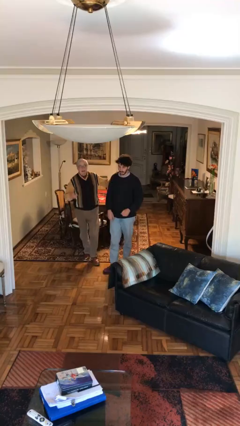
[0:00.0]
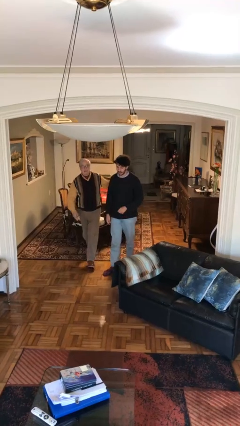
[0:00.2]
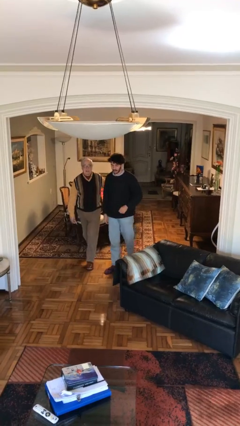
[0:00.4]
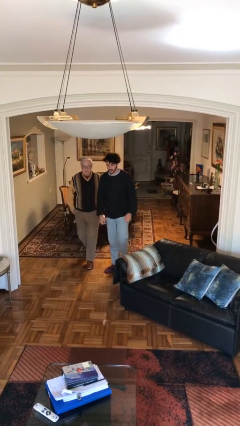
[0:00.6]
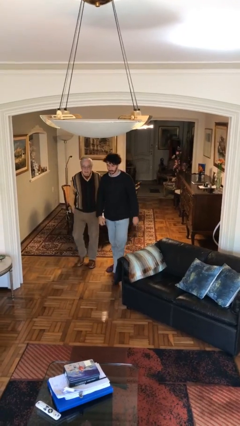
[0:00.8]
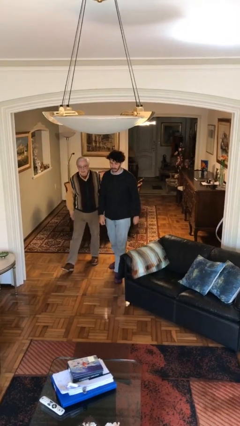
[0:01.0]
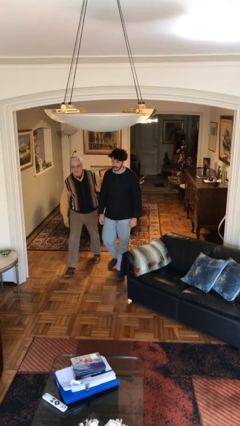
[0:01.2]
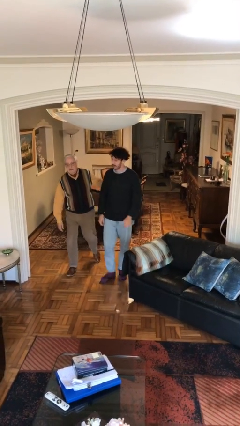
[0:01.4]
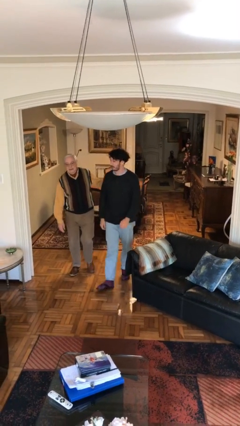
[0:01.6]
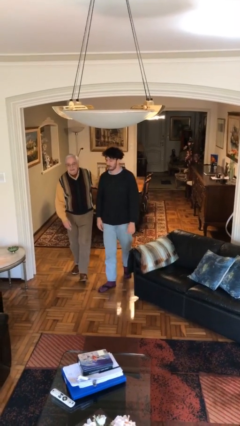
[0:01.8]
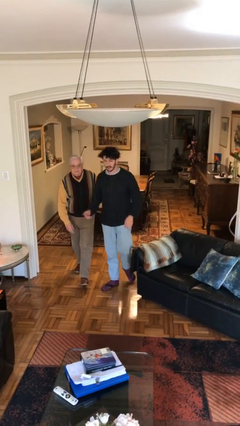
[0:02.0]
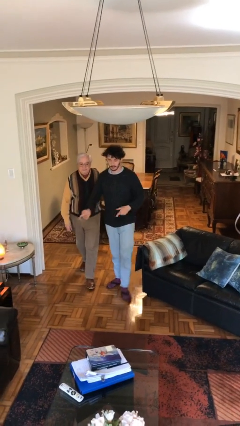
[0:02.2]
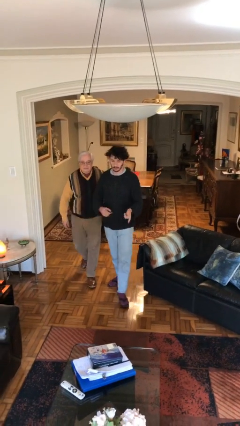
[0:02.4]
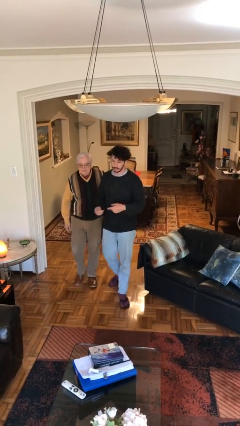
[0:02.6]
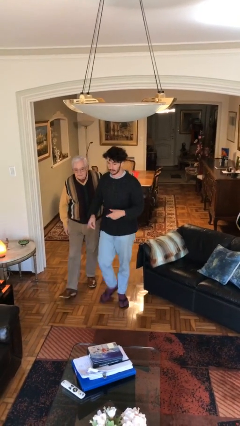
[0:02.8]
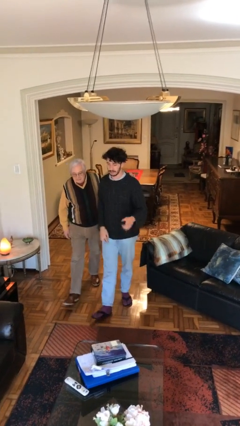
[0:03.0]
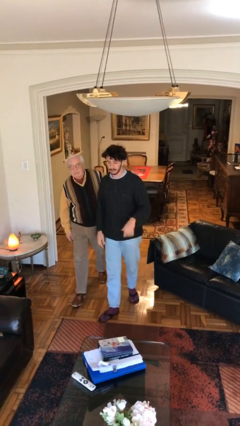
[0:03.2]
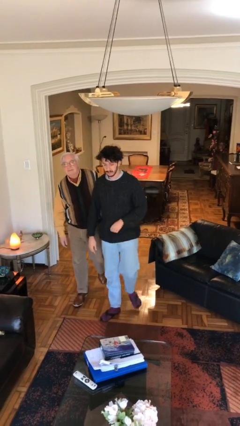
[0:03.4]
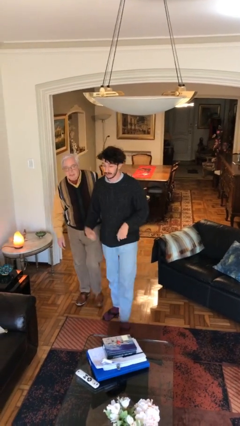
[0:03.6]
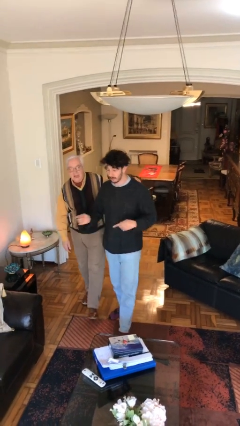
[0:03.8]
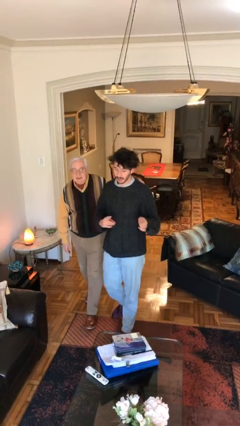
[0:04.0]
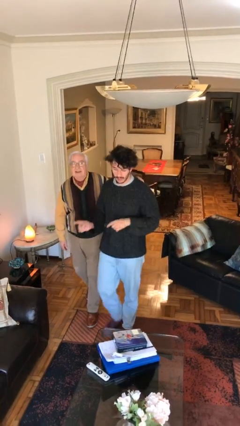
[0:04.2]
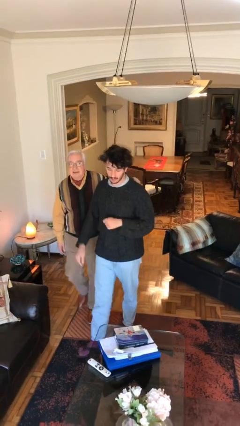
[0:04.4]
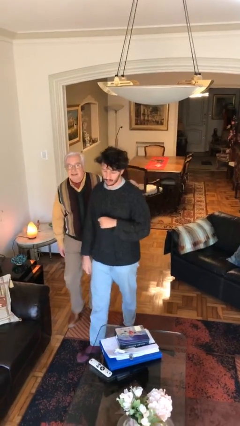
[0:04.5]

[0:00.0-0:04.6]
person talks to person

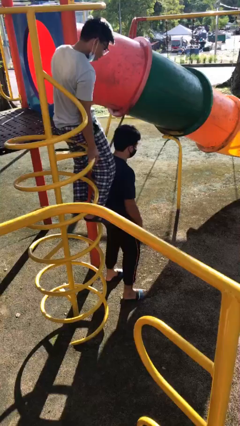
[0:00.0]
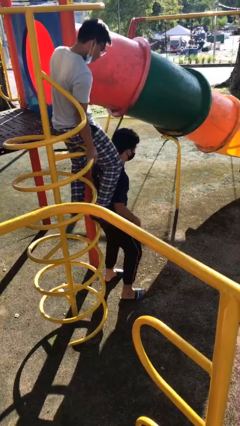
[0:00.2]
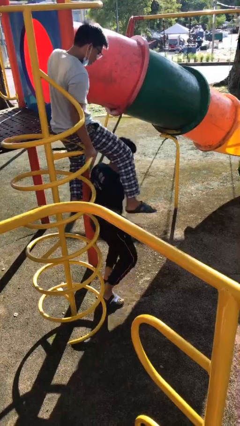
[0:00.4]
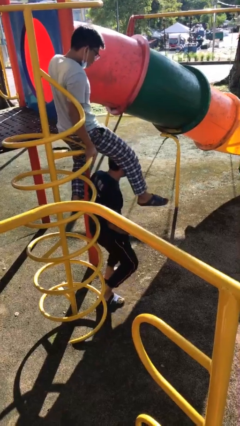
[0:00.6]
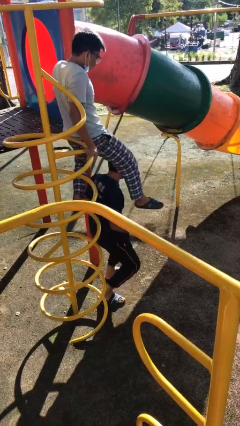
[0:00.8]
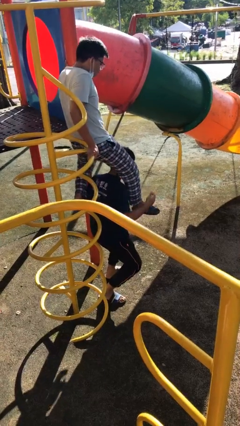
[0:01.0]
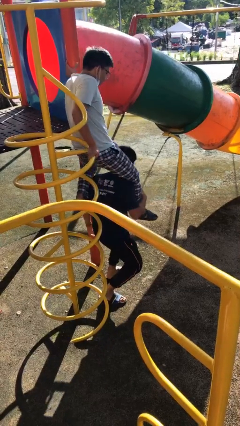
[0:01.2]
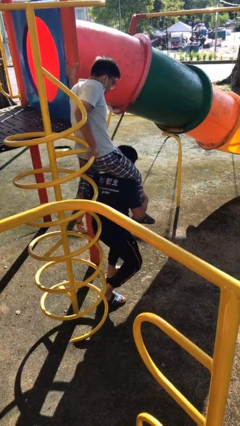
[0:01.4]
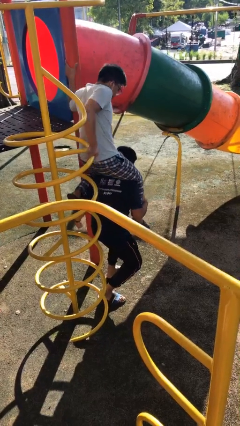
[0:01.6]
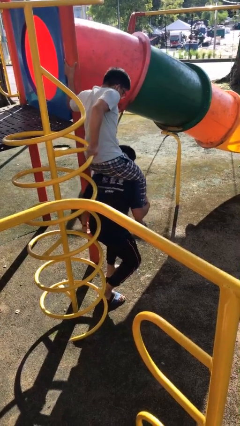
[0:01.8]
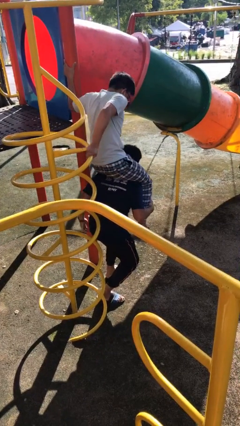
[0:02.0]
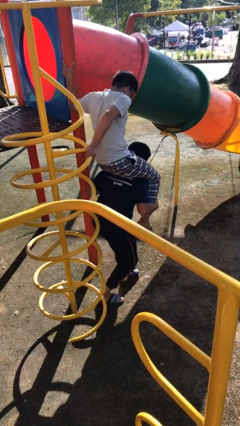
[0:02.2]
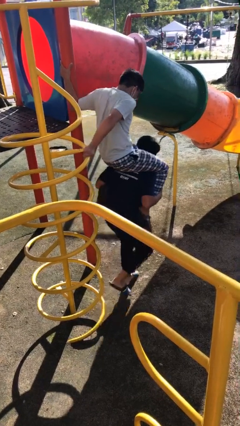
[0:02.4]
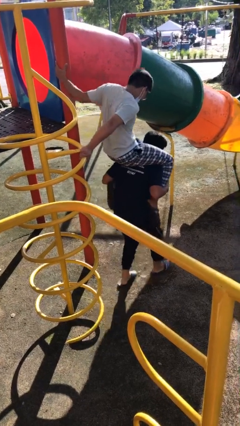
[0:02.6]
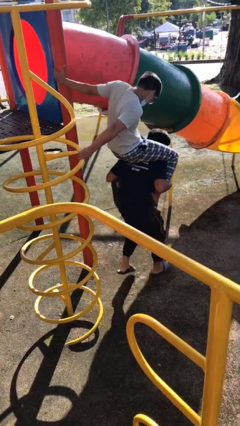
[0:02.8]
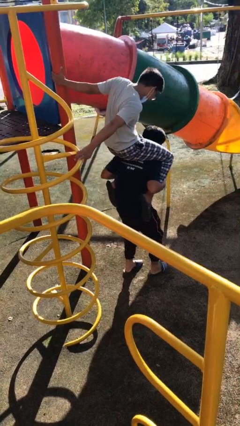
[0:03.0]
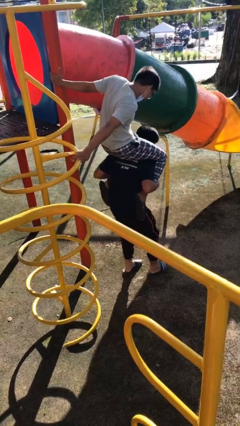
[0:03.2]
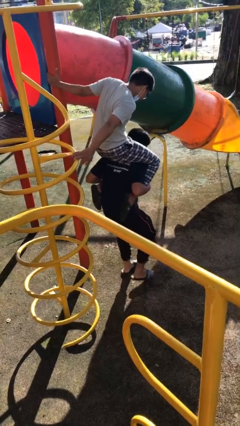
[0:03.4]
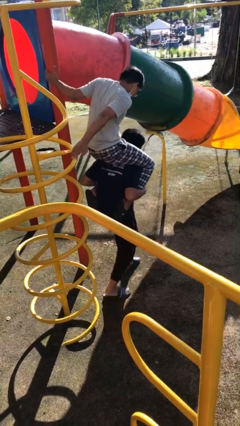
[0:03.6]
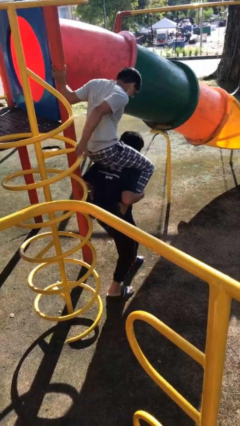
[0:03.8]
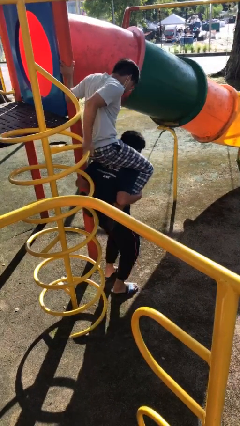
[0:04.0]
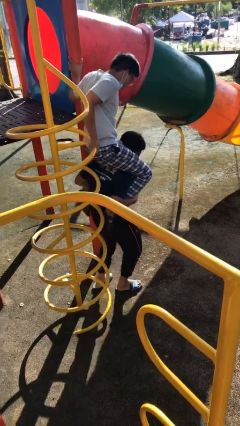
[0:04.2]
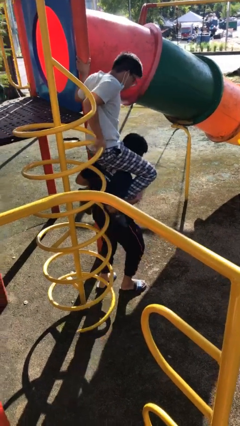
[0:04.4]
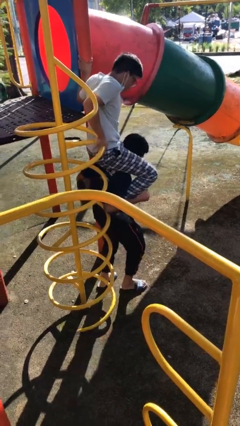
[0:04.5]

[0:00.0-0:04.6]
person carries person on shoulders

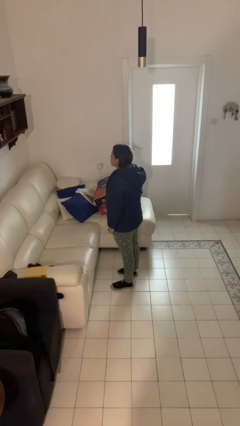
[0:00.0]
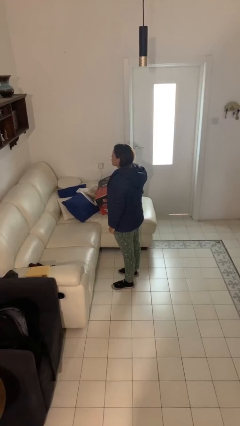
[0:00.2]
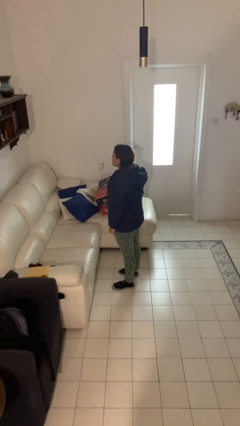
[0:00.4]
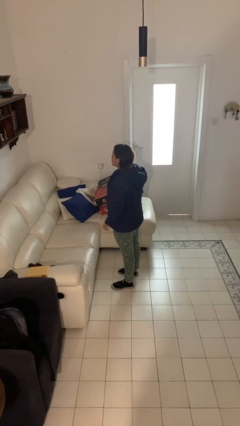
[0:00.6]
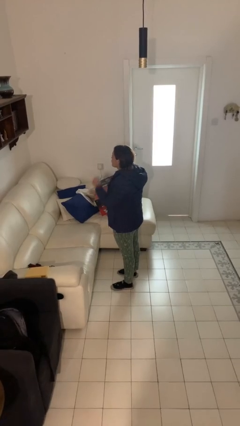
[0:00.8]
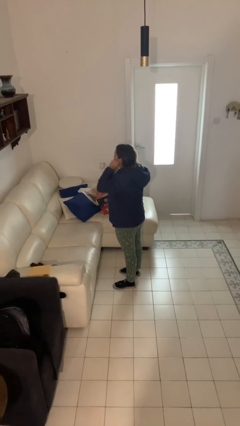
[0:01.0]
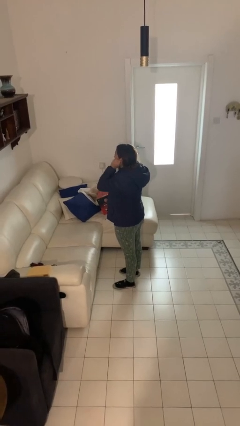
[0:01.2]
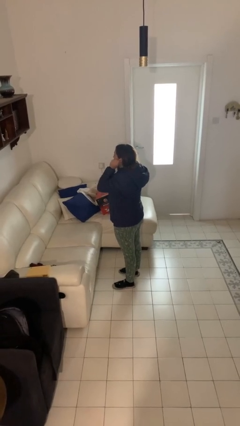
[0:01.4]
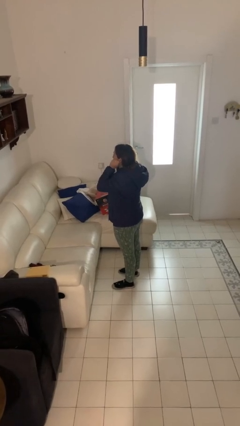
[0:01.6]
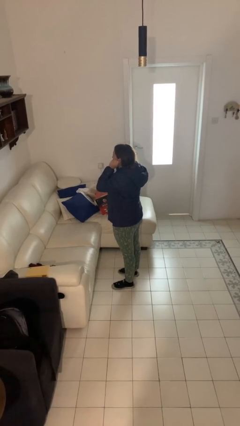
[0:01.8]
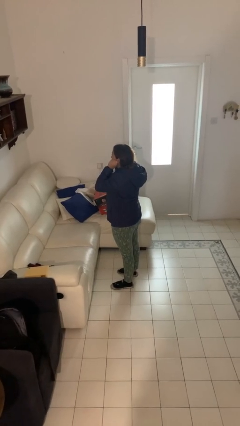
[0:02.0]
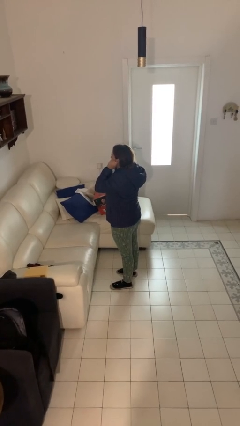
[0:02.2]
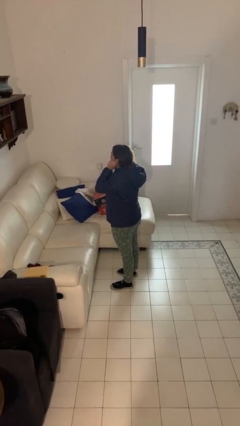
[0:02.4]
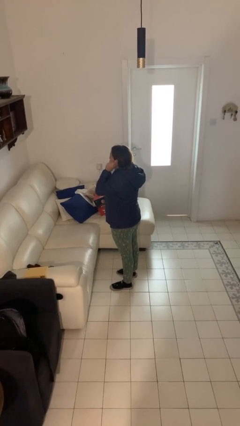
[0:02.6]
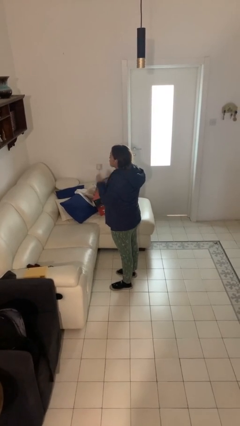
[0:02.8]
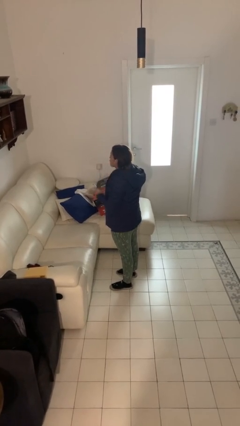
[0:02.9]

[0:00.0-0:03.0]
person touches earlobe

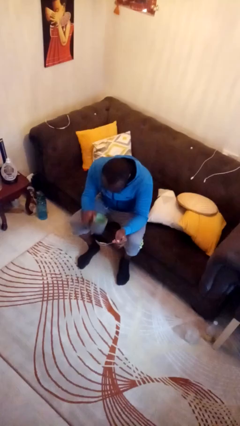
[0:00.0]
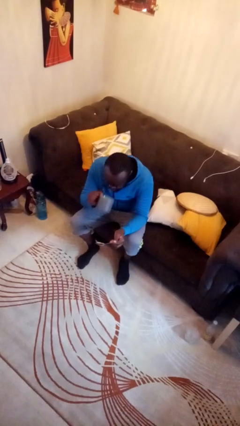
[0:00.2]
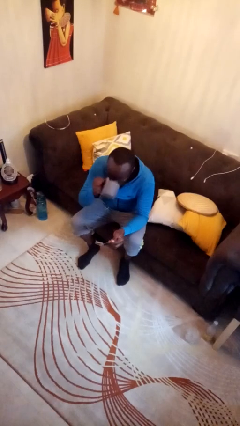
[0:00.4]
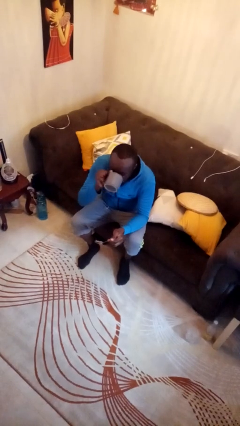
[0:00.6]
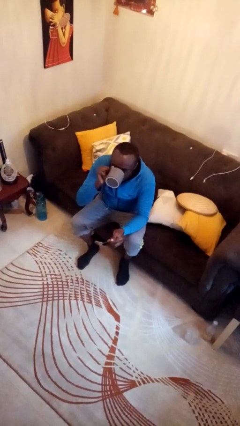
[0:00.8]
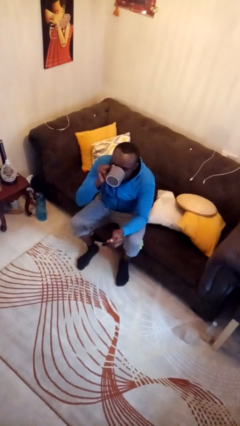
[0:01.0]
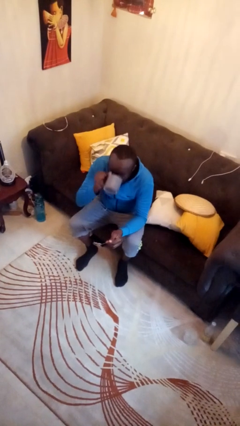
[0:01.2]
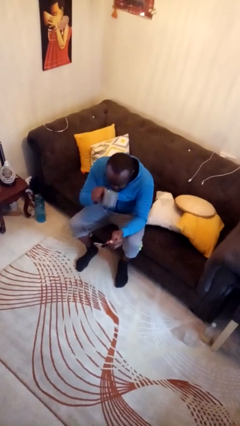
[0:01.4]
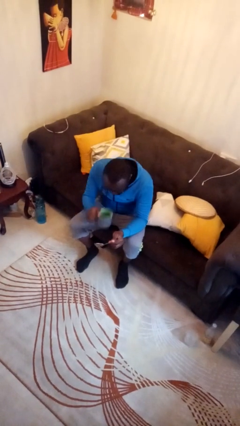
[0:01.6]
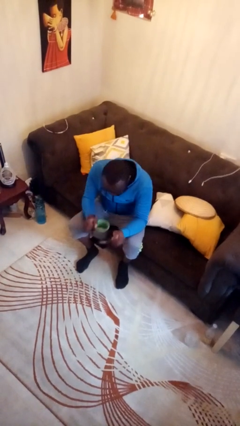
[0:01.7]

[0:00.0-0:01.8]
person drinks from mug

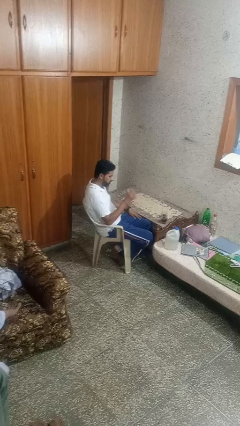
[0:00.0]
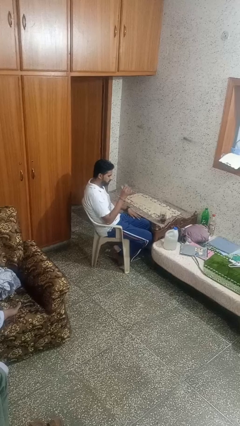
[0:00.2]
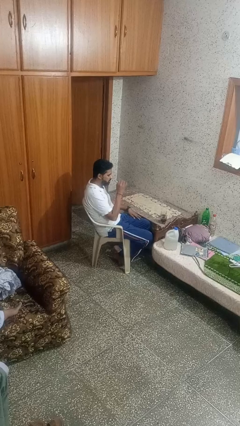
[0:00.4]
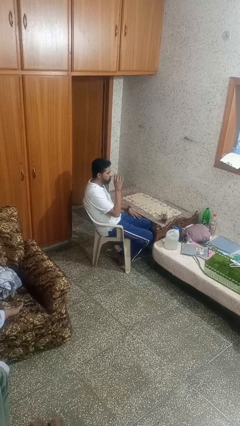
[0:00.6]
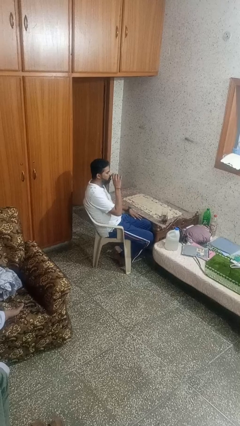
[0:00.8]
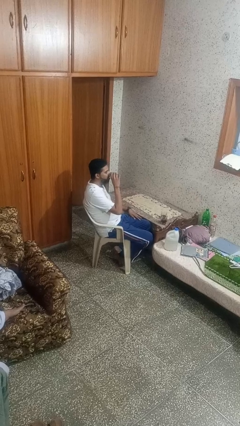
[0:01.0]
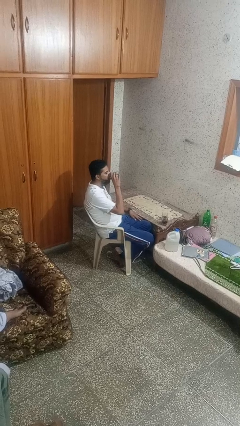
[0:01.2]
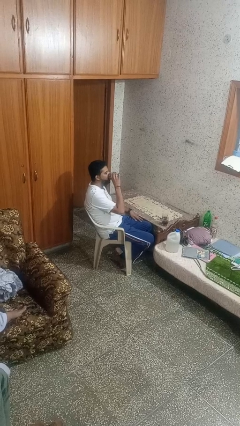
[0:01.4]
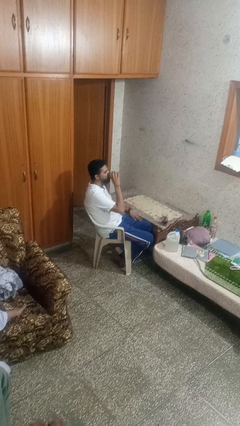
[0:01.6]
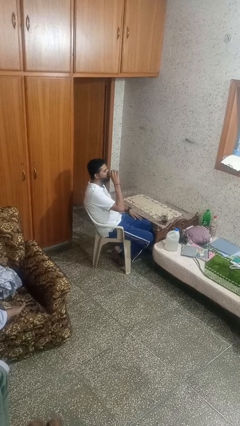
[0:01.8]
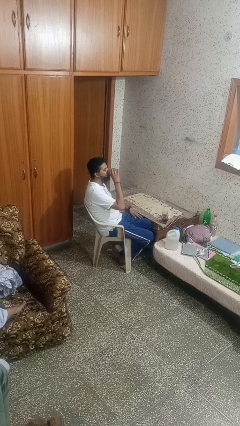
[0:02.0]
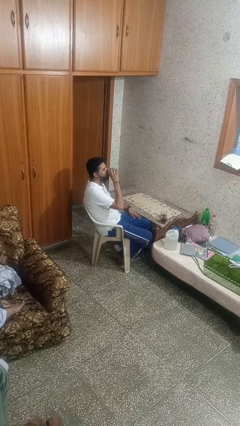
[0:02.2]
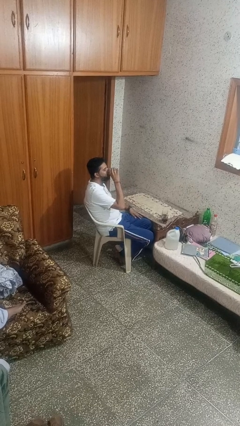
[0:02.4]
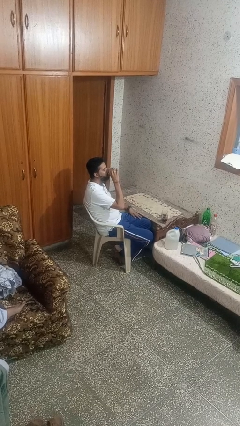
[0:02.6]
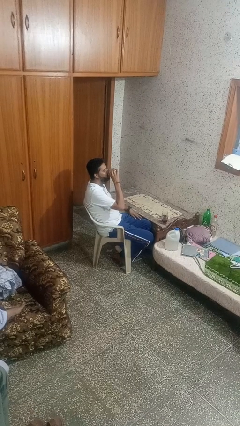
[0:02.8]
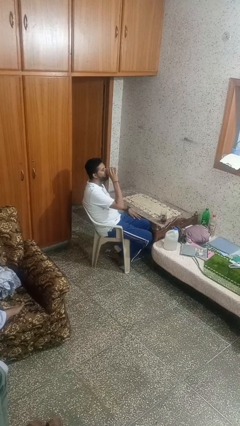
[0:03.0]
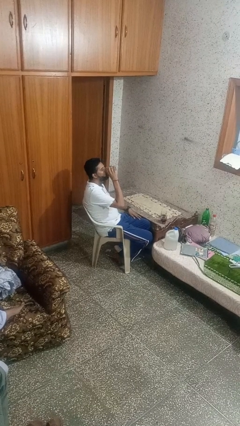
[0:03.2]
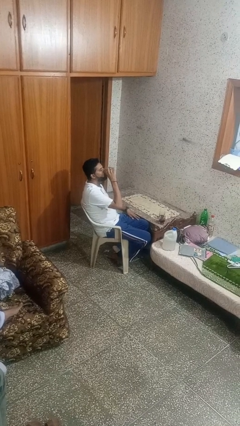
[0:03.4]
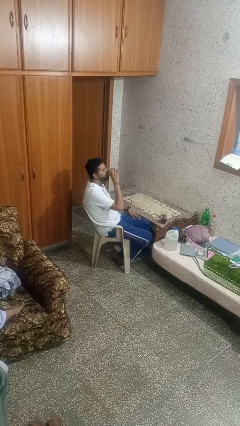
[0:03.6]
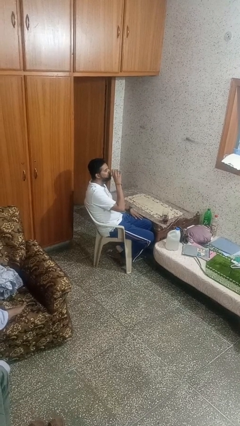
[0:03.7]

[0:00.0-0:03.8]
person drinks from shotglass
